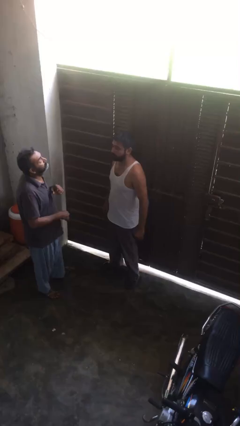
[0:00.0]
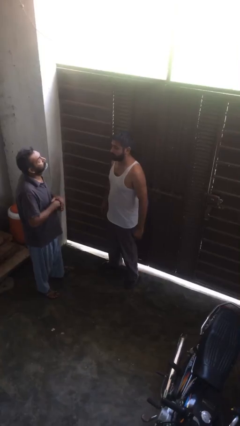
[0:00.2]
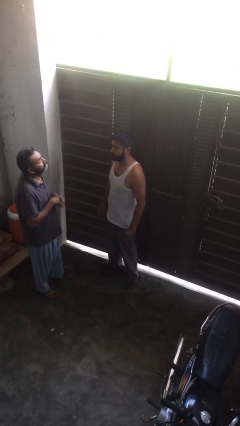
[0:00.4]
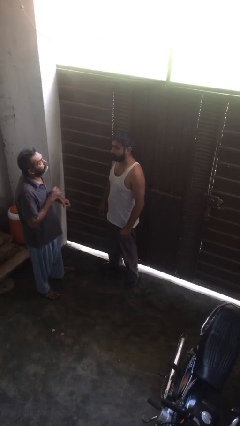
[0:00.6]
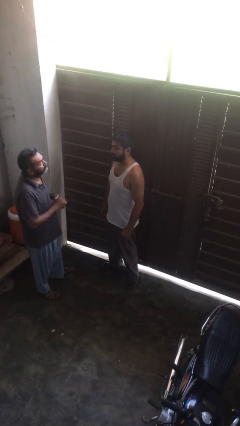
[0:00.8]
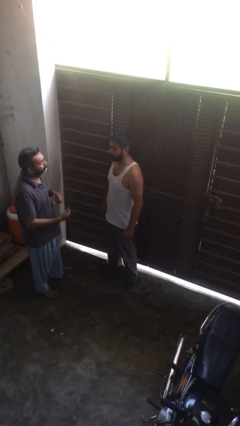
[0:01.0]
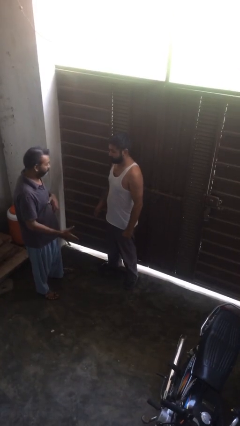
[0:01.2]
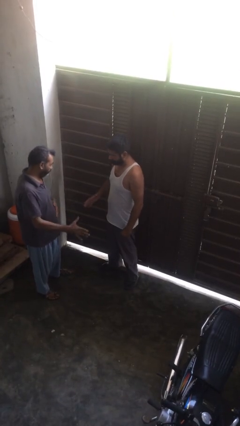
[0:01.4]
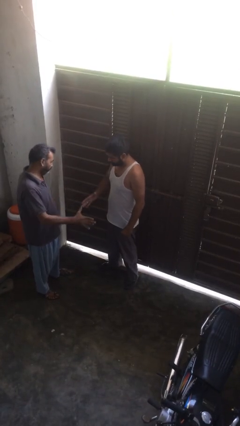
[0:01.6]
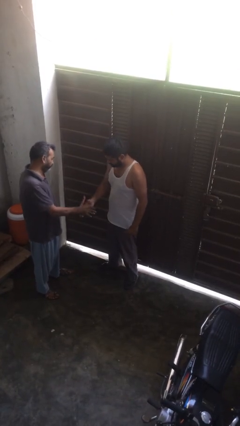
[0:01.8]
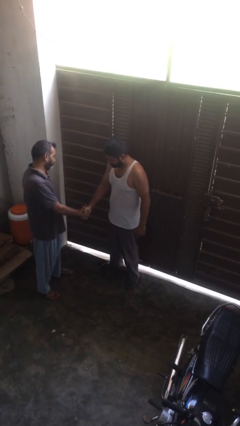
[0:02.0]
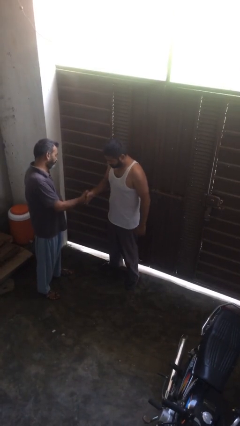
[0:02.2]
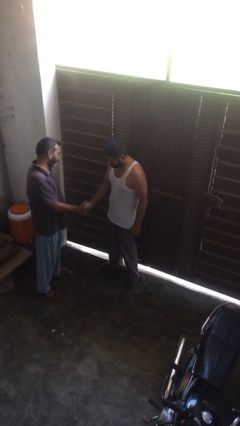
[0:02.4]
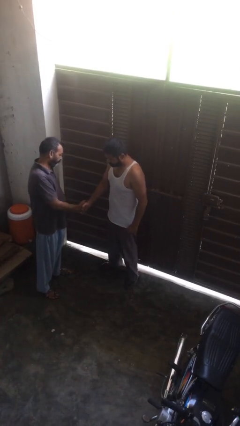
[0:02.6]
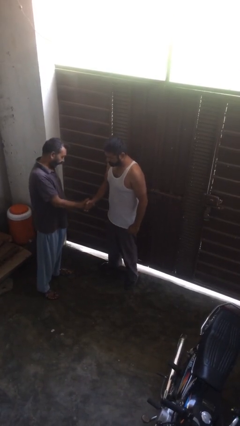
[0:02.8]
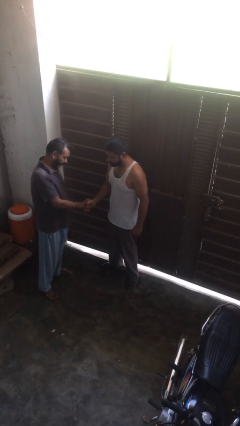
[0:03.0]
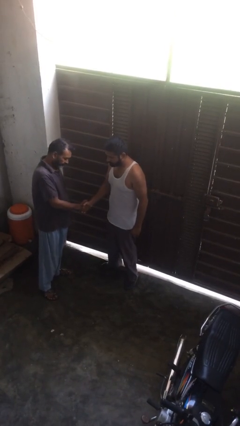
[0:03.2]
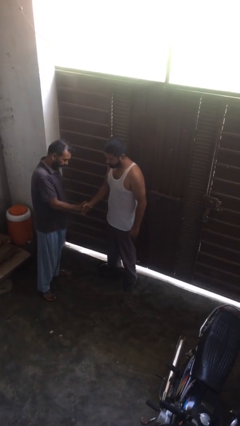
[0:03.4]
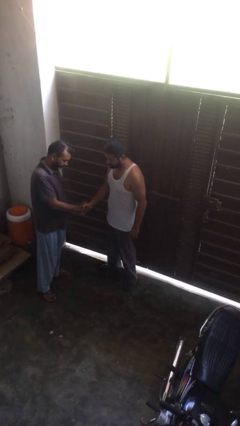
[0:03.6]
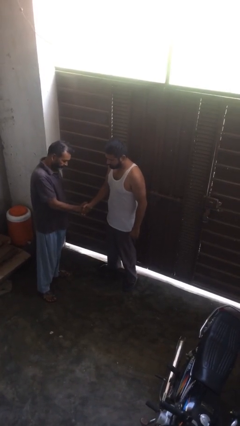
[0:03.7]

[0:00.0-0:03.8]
person shakes hand

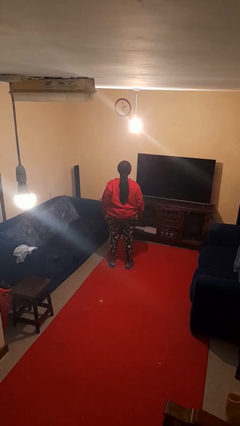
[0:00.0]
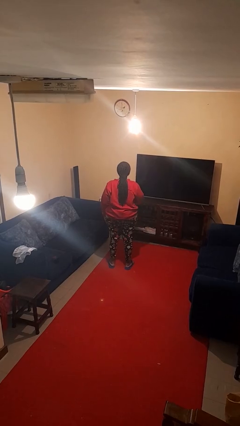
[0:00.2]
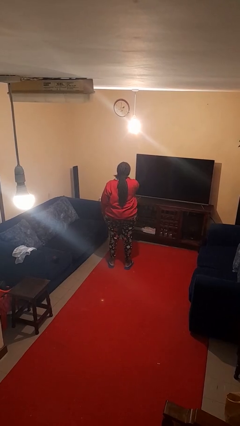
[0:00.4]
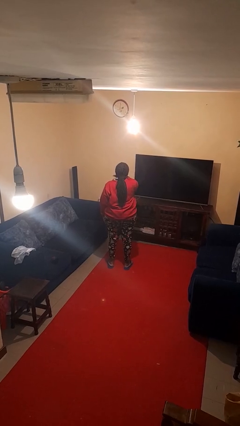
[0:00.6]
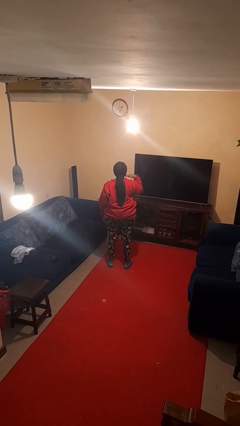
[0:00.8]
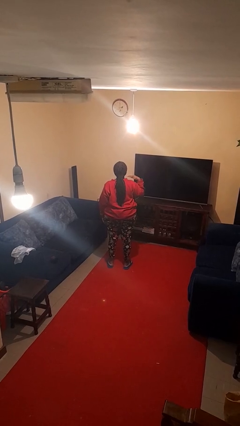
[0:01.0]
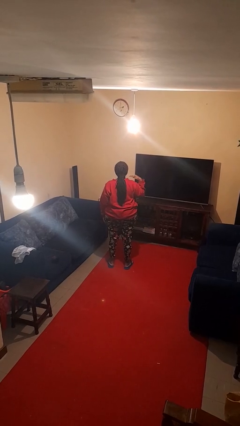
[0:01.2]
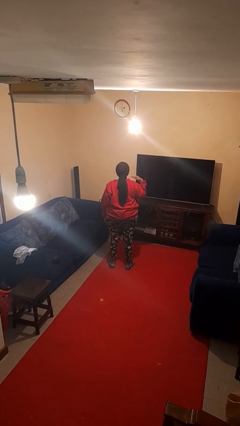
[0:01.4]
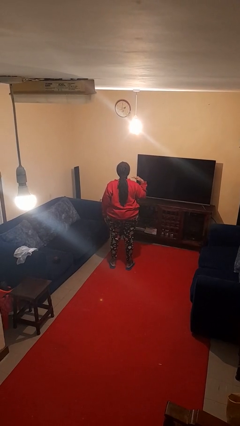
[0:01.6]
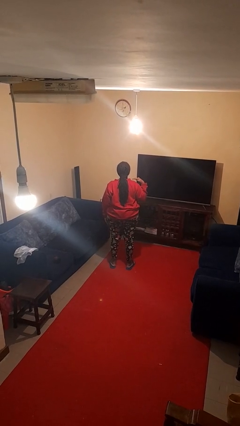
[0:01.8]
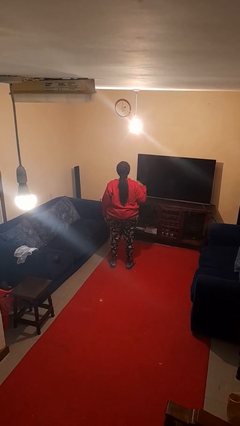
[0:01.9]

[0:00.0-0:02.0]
person gestures cut

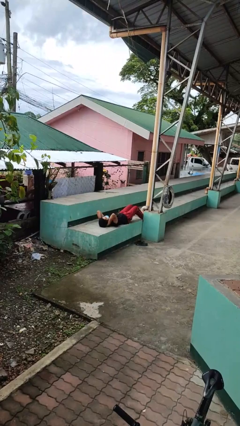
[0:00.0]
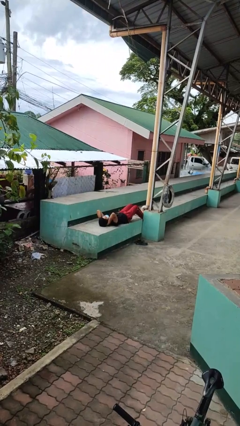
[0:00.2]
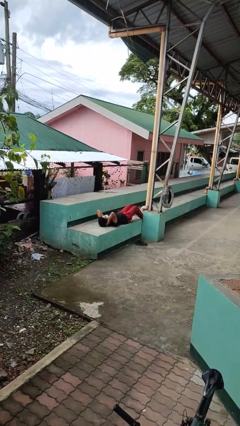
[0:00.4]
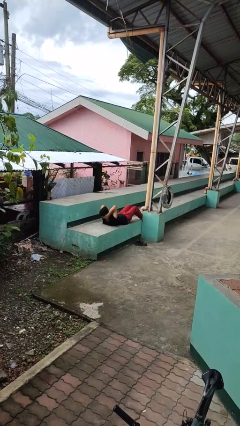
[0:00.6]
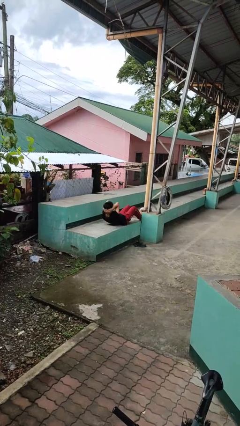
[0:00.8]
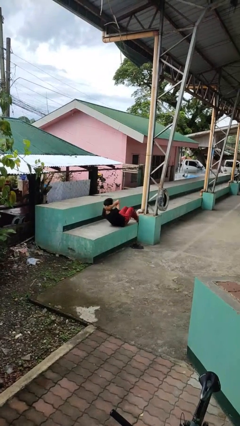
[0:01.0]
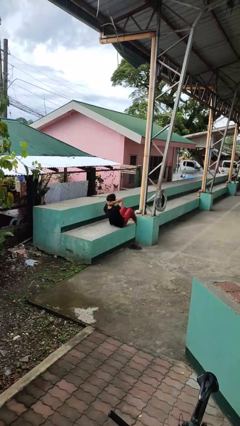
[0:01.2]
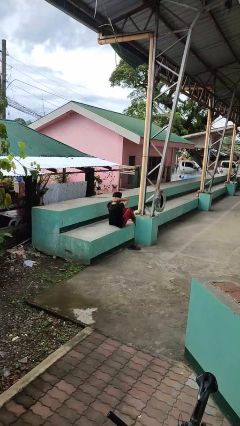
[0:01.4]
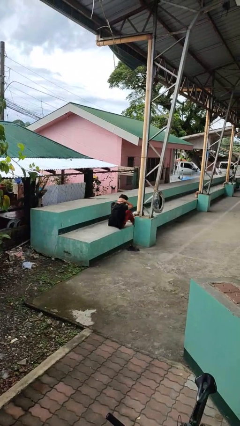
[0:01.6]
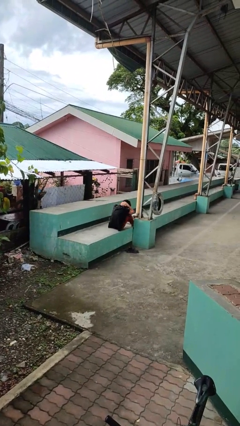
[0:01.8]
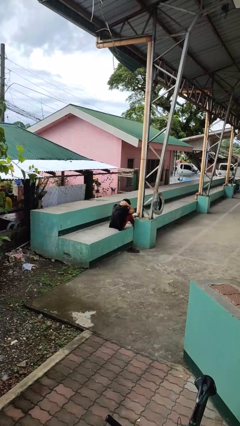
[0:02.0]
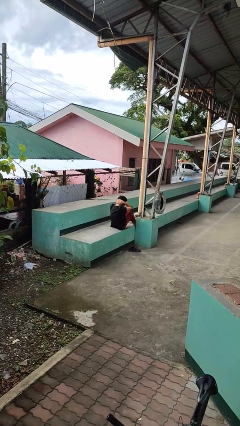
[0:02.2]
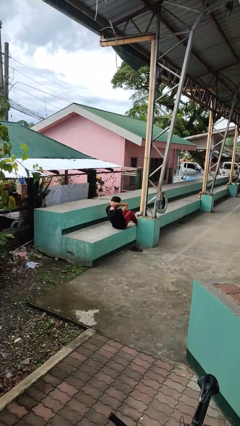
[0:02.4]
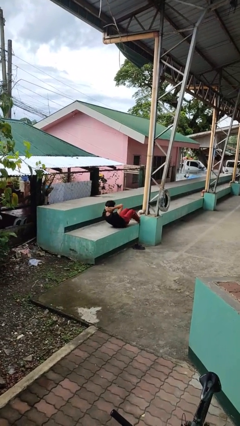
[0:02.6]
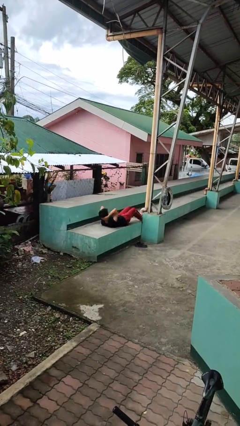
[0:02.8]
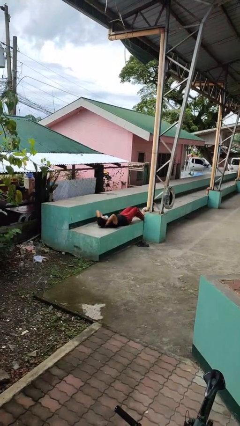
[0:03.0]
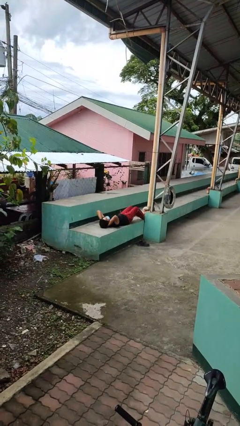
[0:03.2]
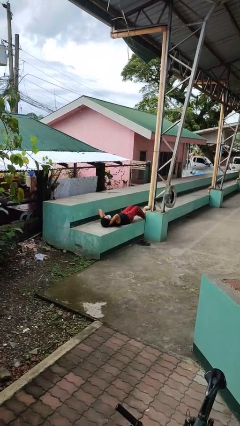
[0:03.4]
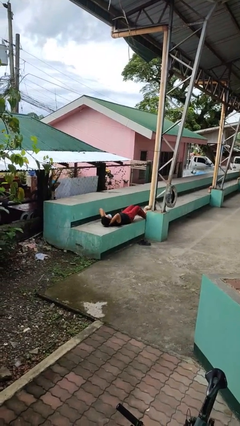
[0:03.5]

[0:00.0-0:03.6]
person exercises with situp

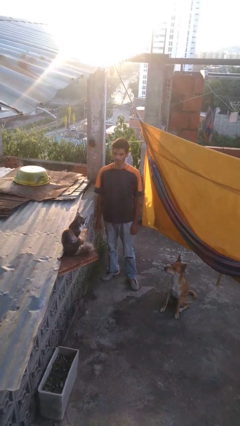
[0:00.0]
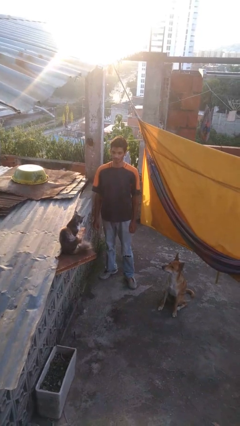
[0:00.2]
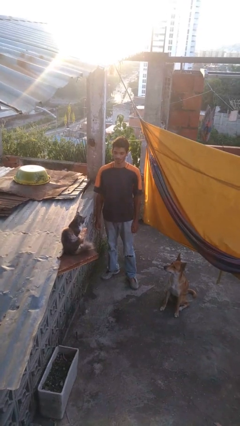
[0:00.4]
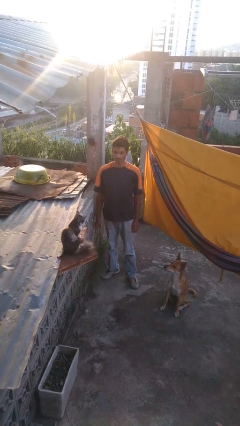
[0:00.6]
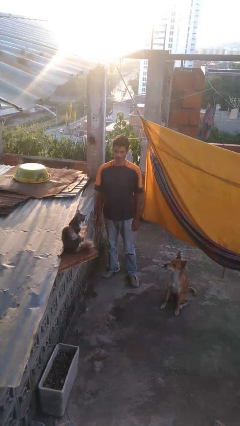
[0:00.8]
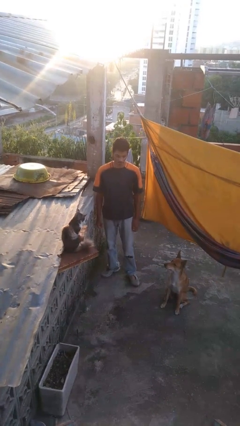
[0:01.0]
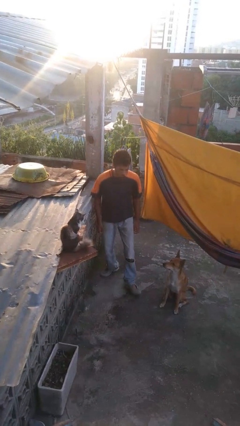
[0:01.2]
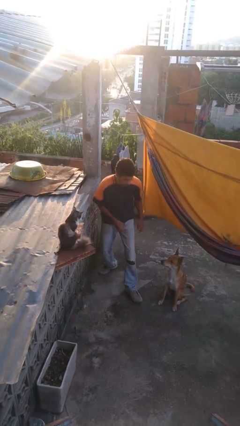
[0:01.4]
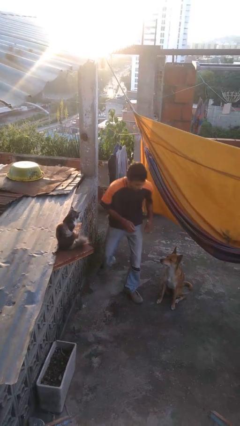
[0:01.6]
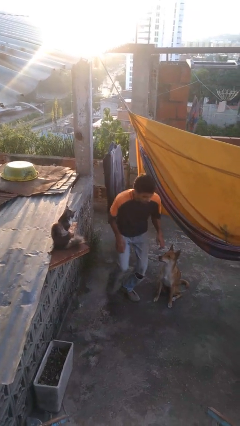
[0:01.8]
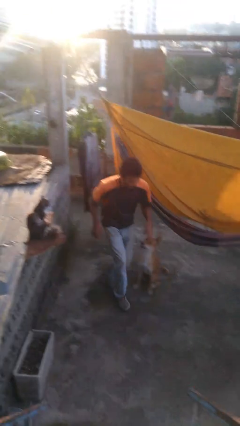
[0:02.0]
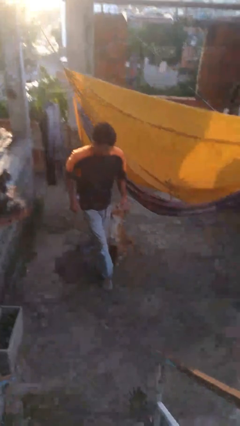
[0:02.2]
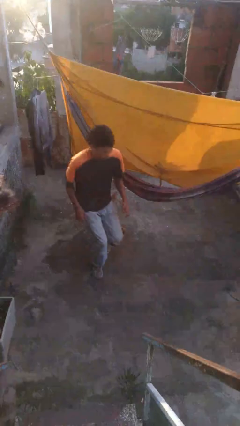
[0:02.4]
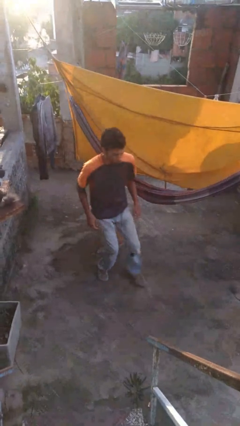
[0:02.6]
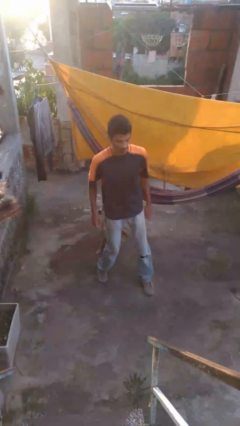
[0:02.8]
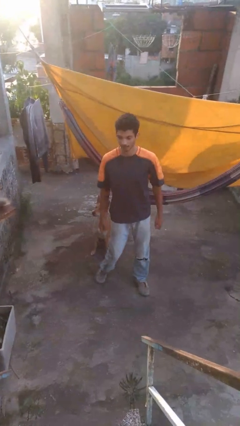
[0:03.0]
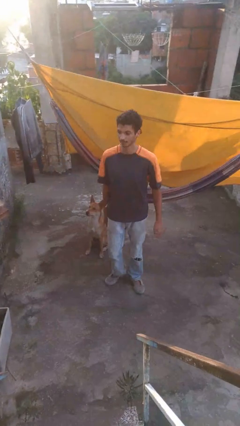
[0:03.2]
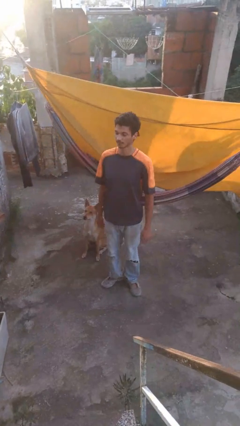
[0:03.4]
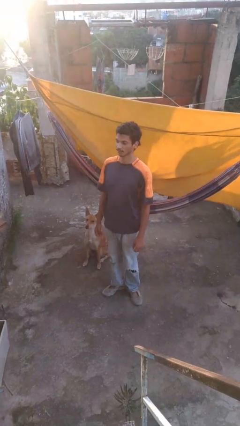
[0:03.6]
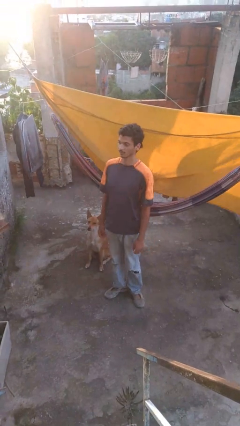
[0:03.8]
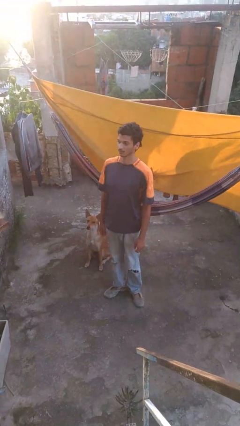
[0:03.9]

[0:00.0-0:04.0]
person walks tiptoe

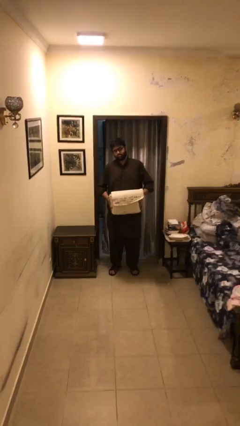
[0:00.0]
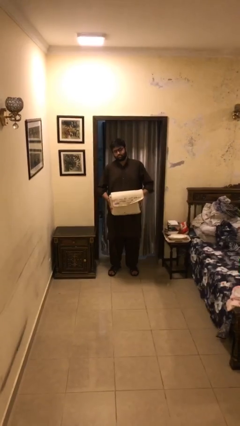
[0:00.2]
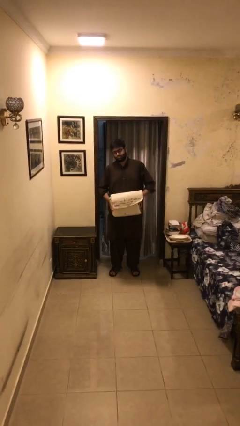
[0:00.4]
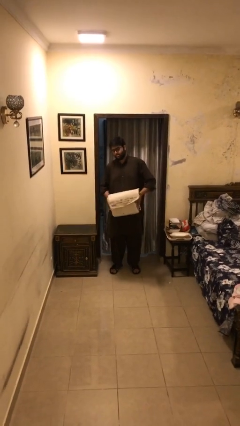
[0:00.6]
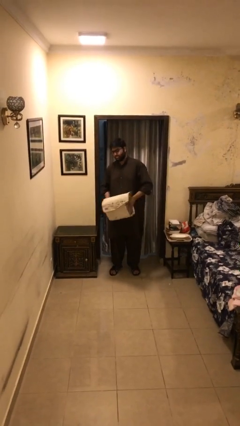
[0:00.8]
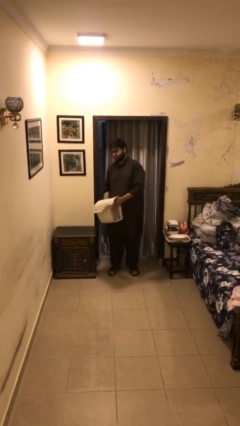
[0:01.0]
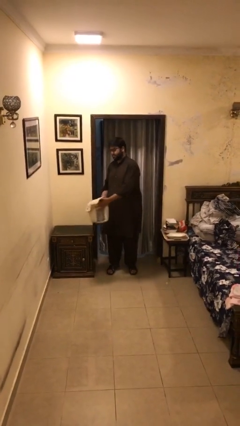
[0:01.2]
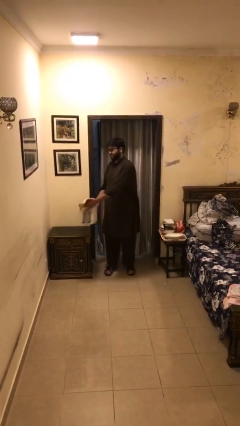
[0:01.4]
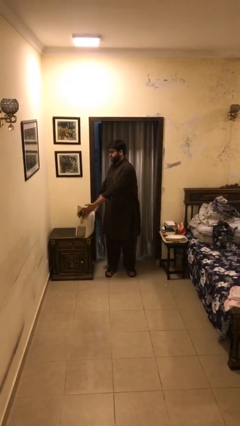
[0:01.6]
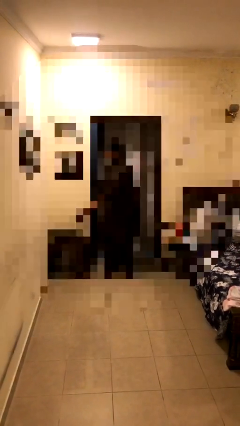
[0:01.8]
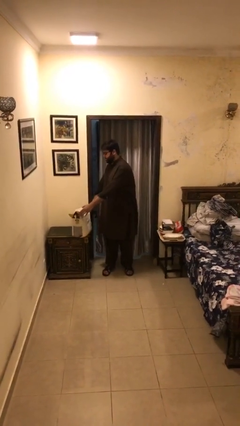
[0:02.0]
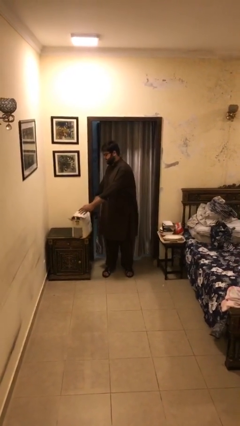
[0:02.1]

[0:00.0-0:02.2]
person puts down object on table

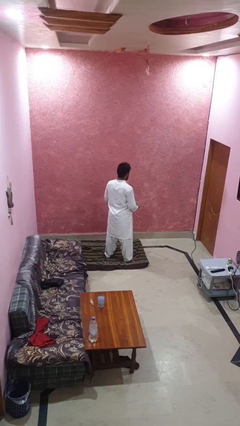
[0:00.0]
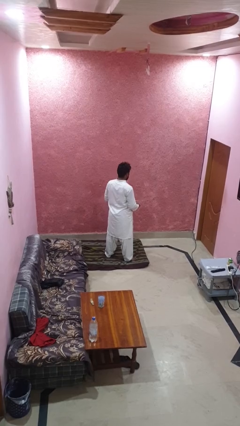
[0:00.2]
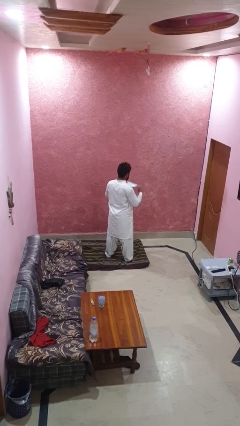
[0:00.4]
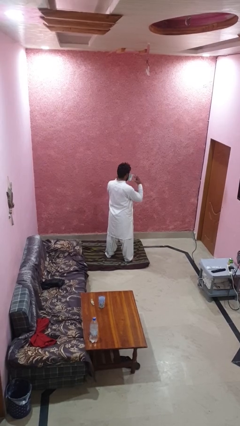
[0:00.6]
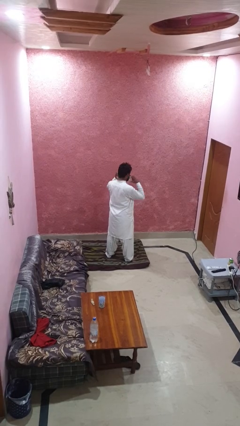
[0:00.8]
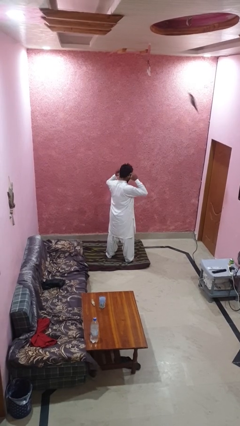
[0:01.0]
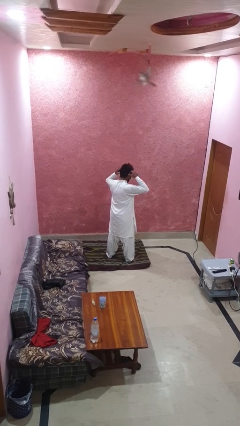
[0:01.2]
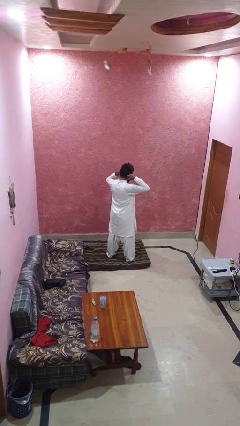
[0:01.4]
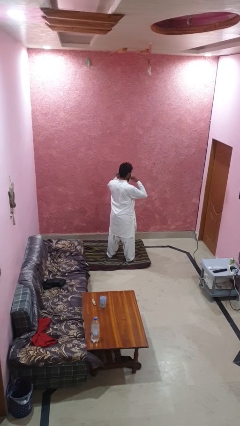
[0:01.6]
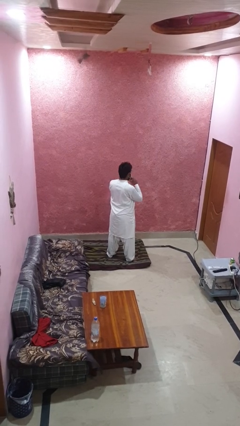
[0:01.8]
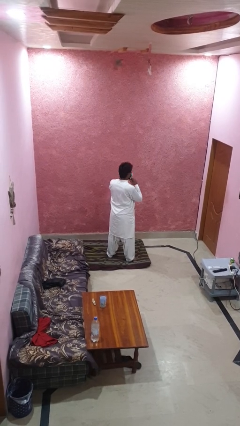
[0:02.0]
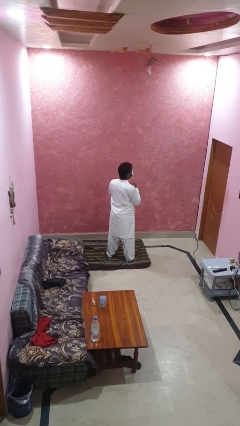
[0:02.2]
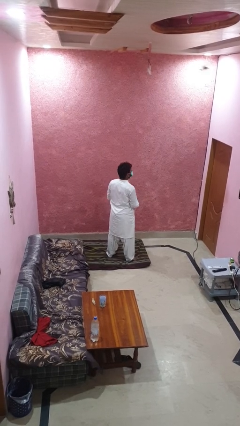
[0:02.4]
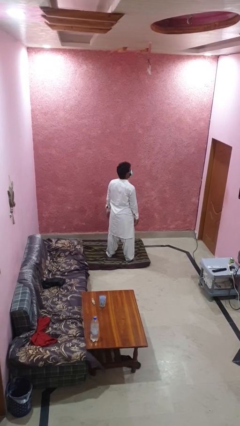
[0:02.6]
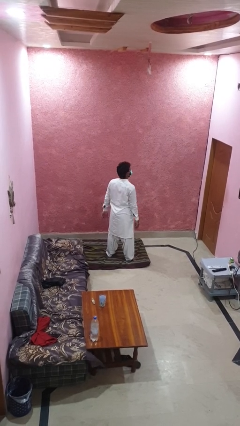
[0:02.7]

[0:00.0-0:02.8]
person puts on facemask
